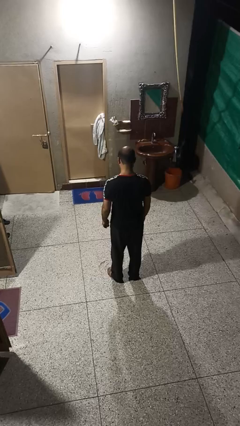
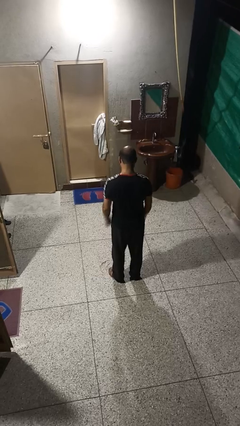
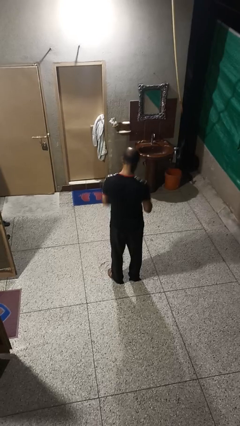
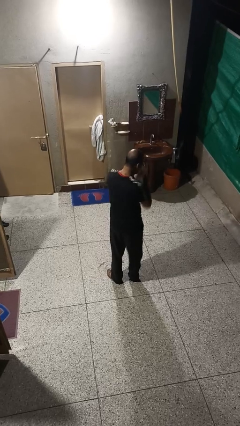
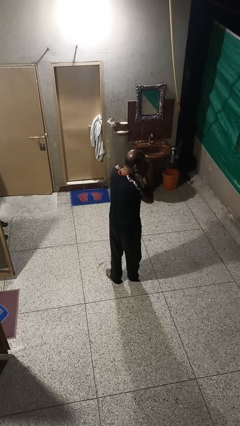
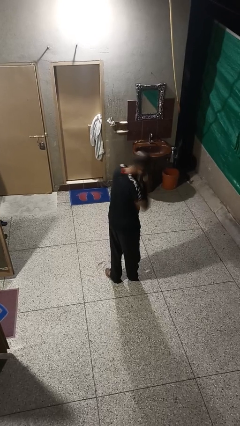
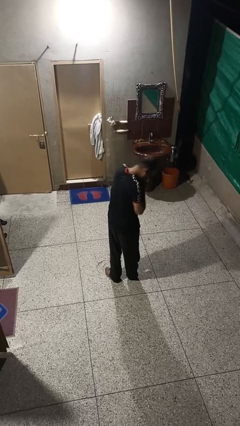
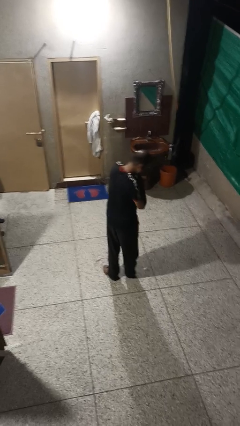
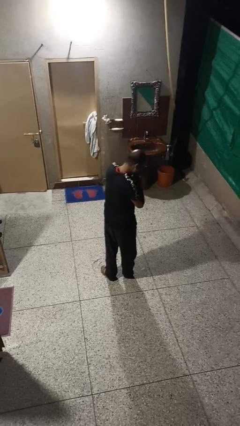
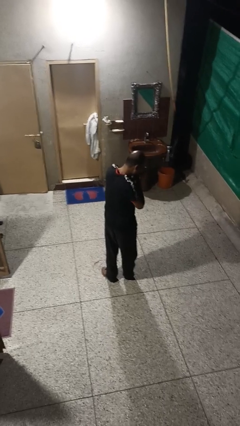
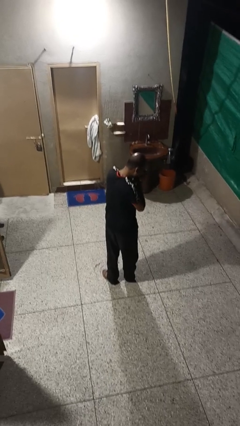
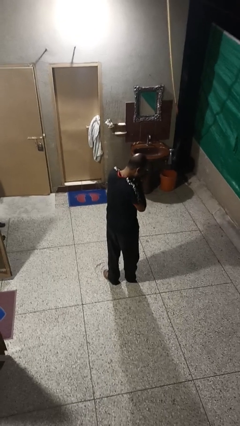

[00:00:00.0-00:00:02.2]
person sneezes into hand

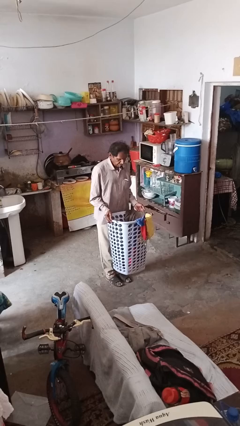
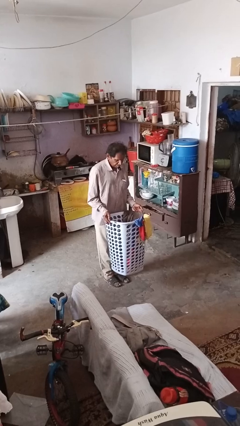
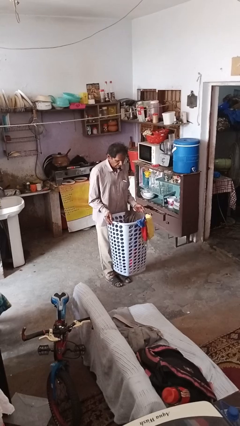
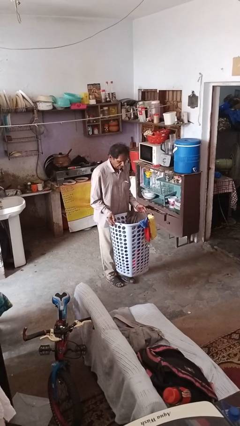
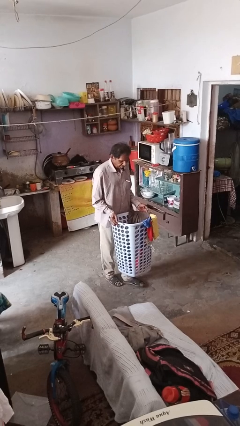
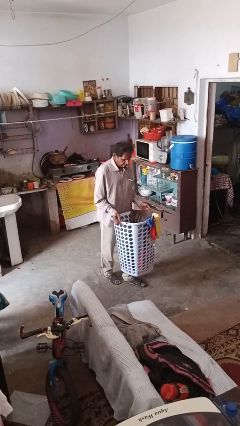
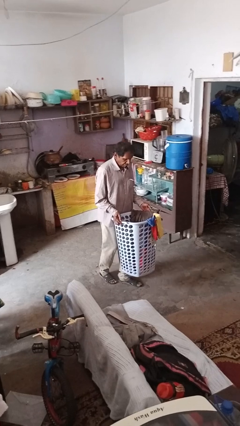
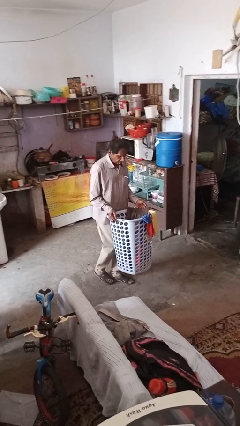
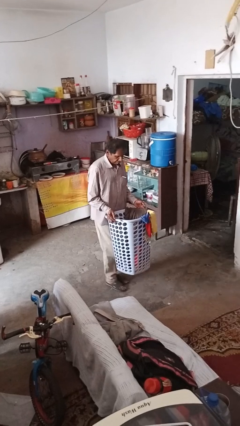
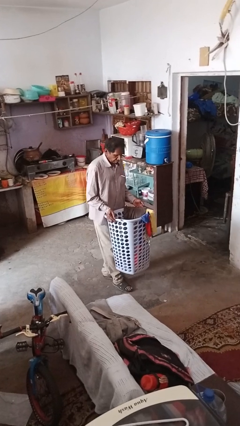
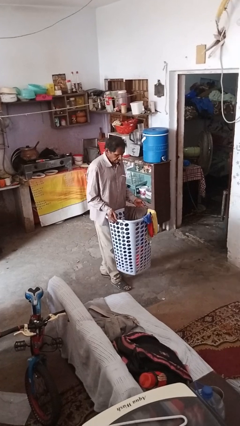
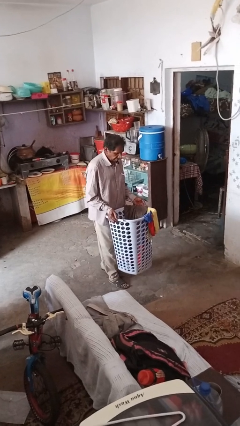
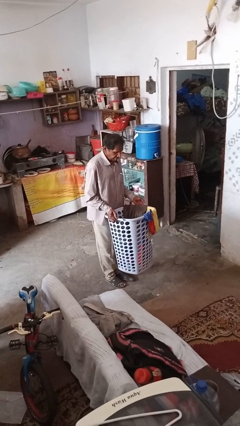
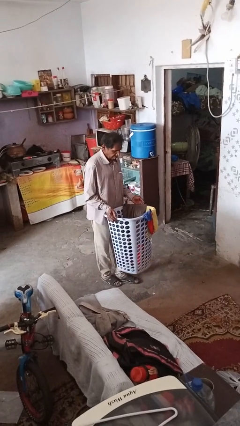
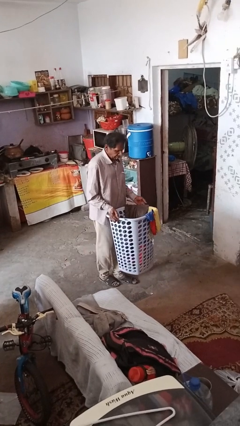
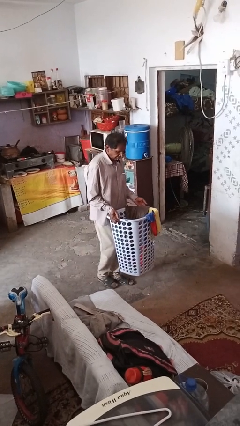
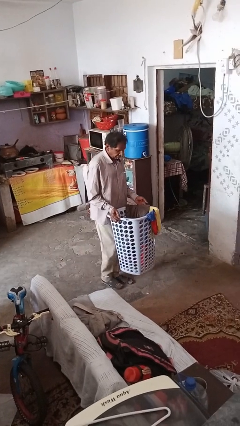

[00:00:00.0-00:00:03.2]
person carries laundry basket

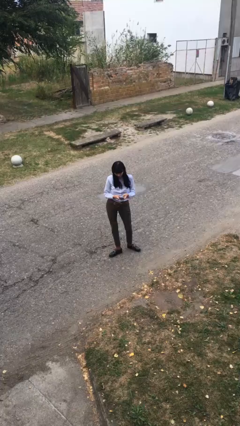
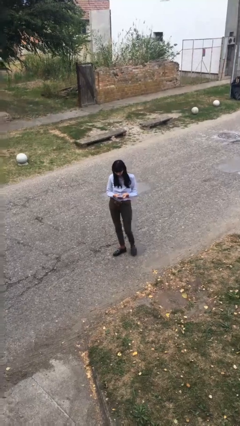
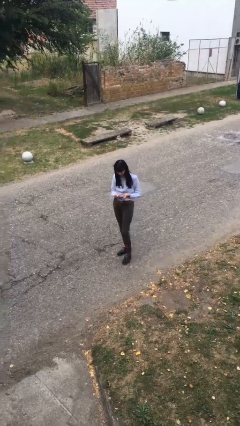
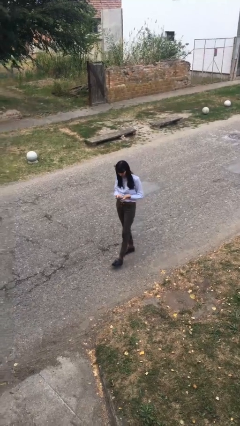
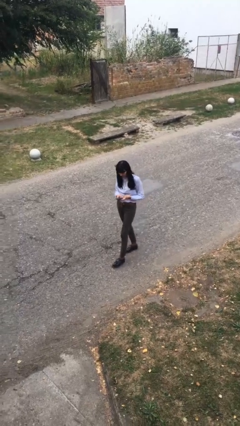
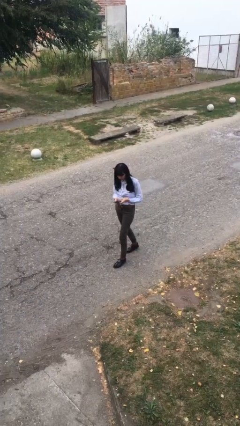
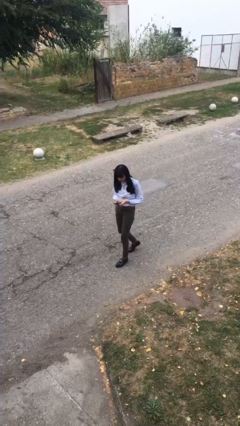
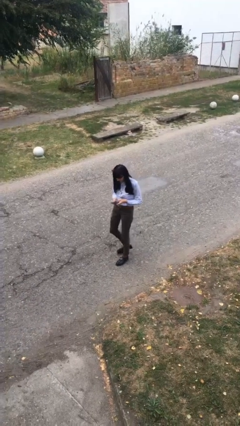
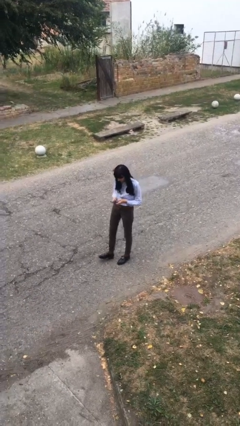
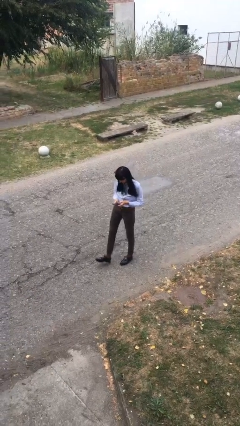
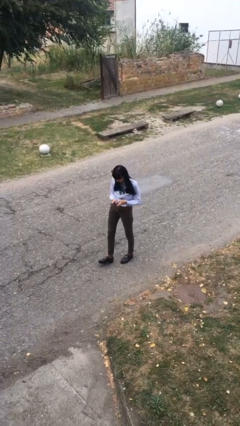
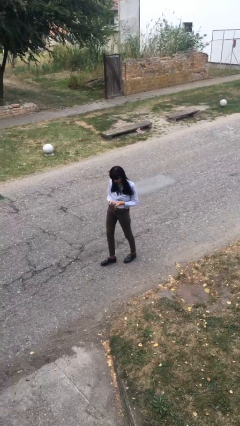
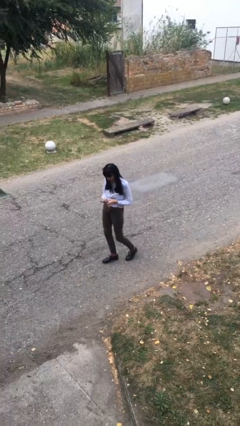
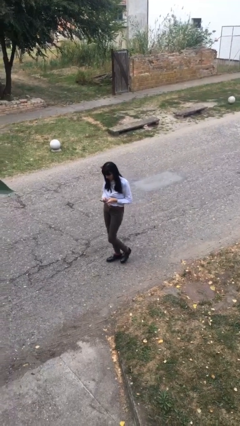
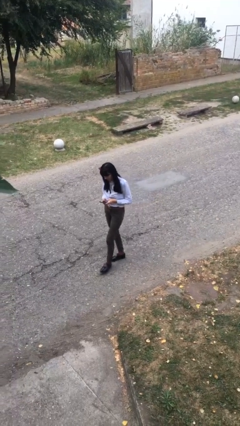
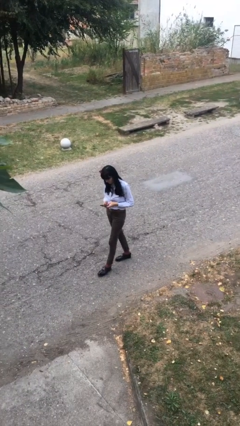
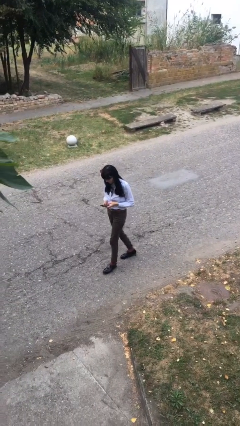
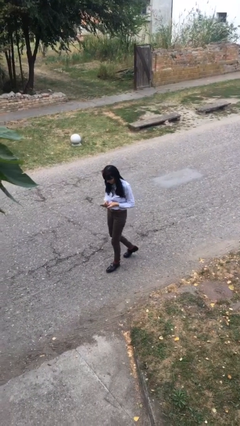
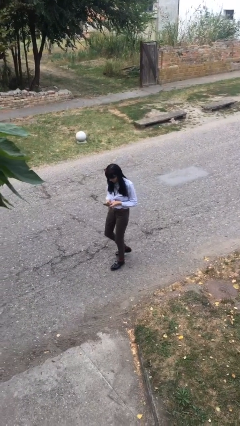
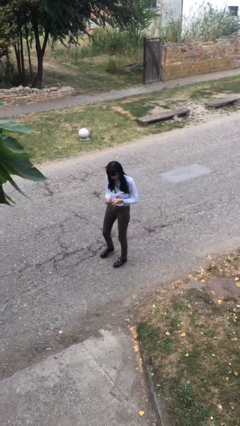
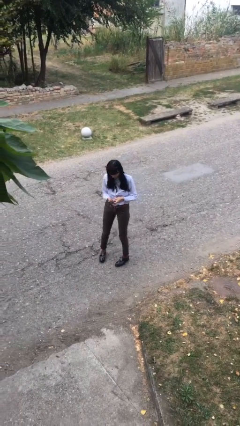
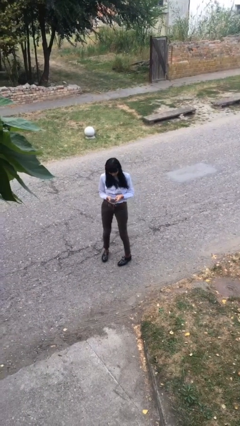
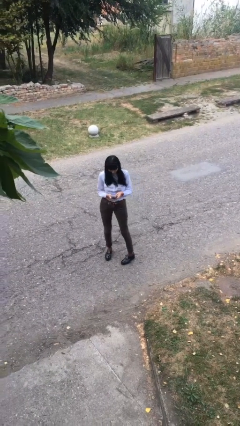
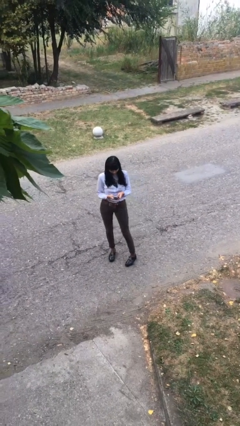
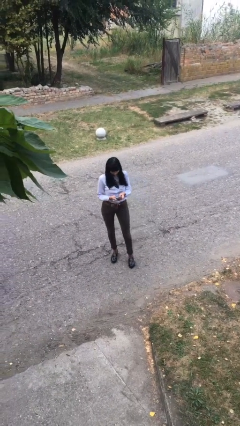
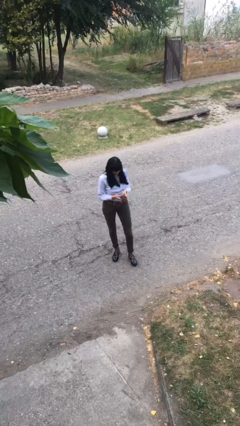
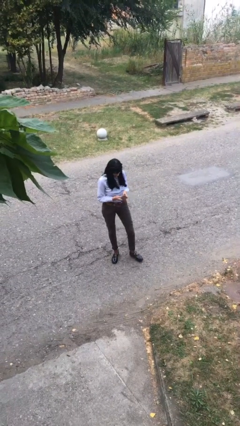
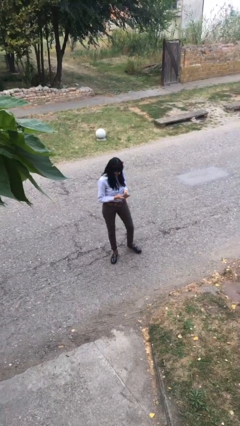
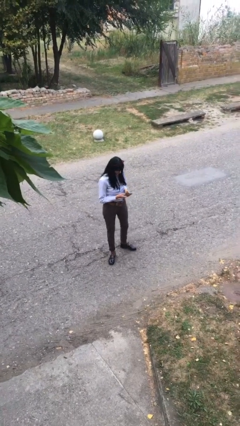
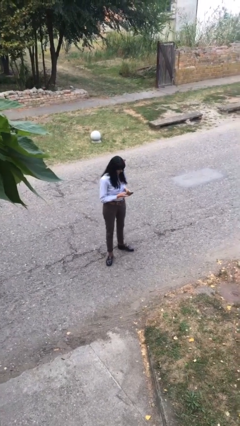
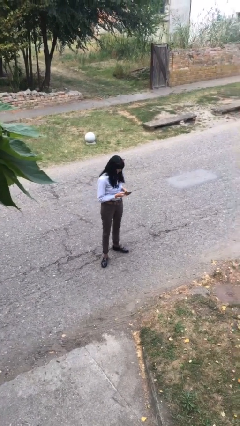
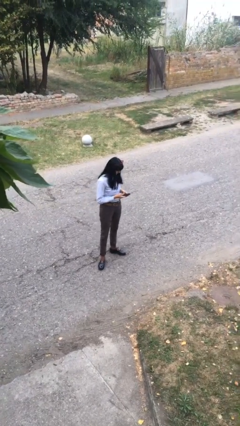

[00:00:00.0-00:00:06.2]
person texts on phone

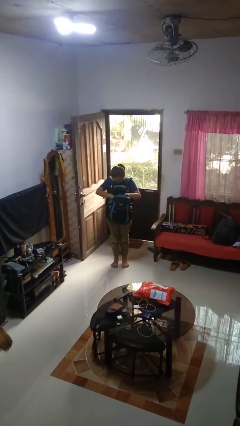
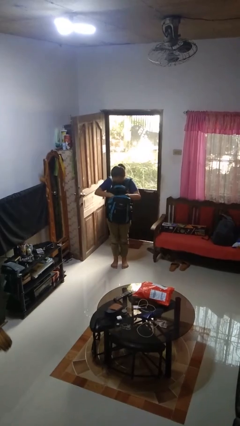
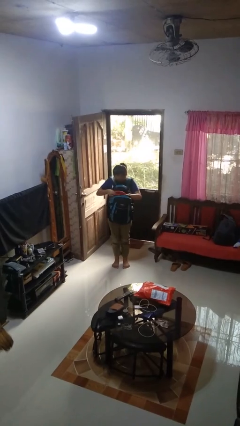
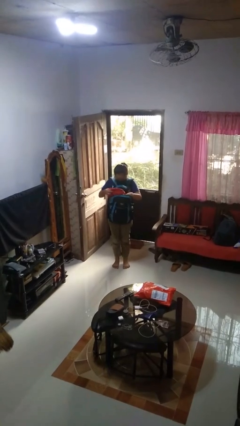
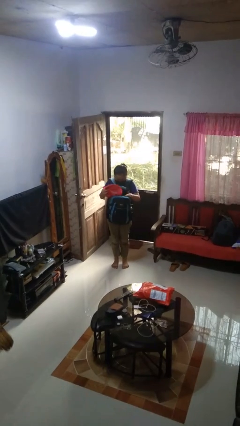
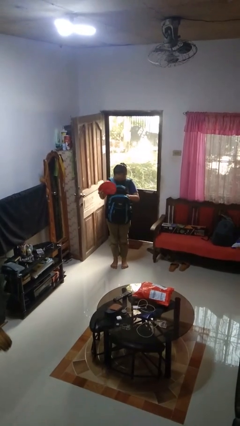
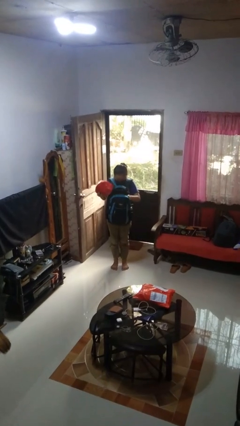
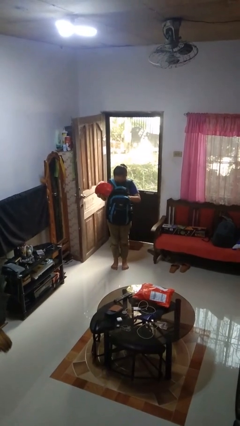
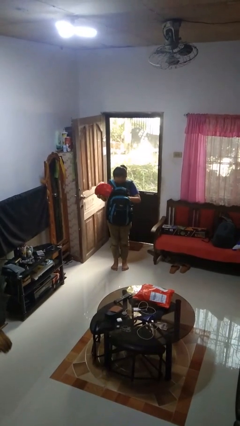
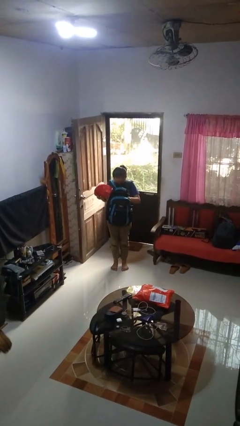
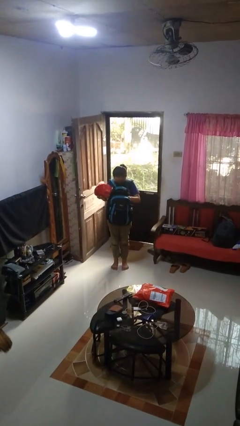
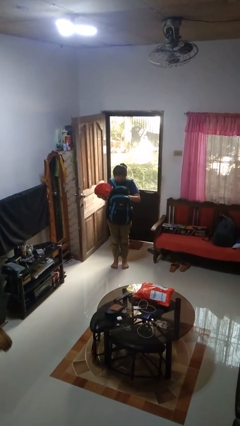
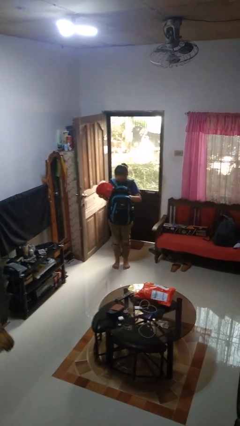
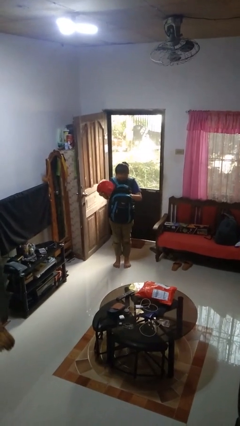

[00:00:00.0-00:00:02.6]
person takes object from backpack

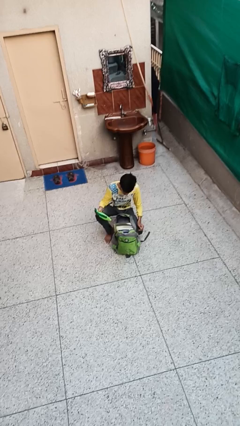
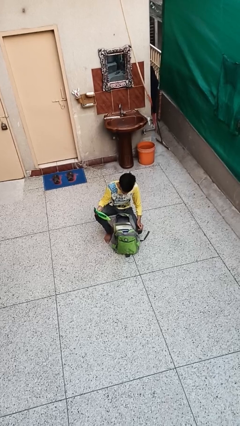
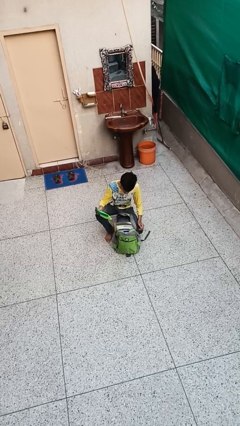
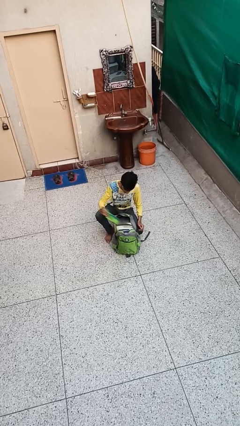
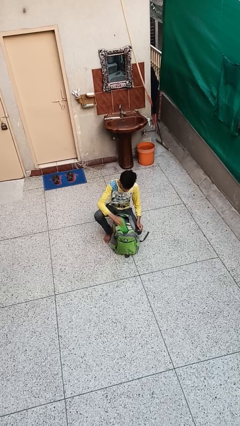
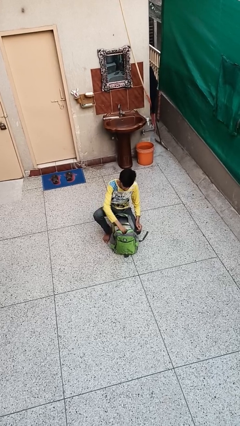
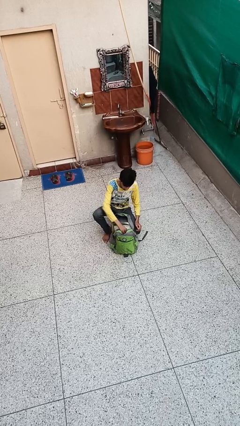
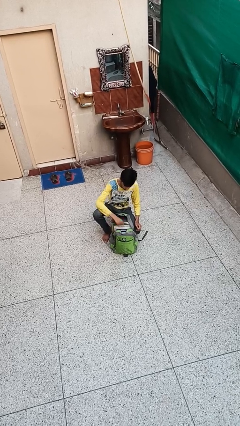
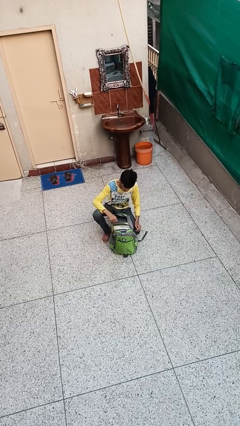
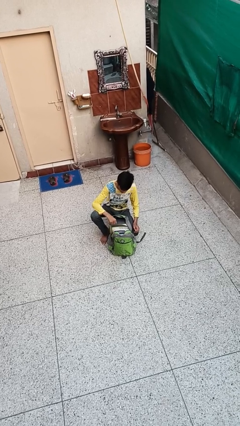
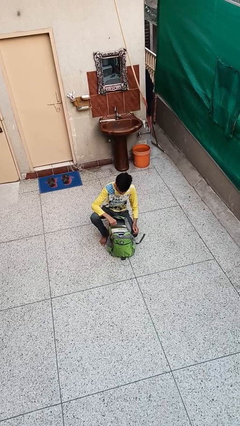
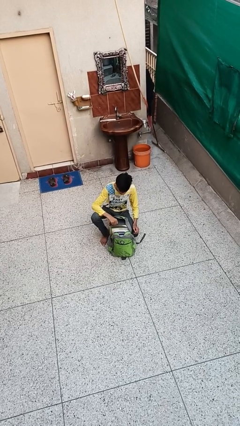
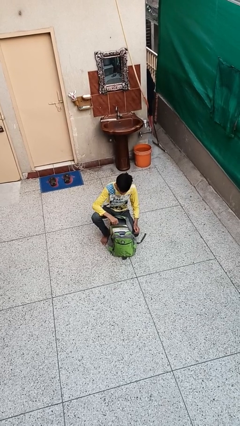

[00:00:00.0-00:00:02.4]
person puts object into backpack

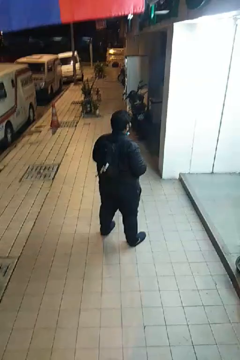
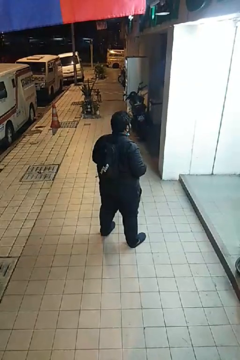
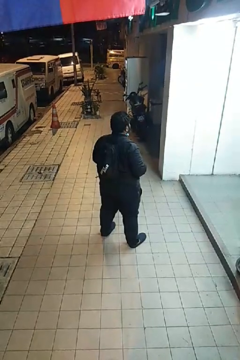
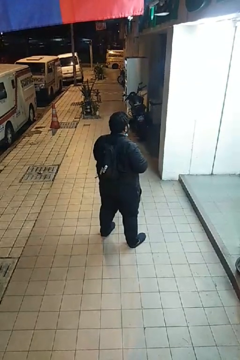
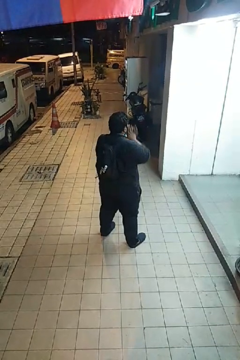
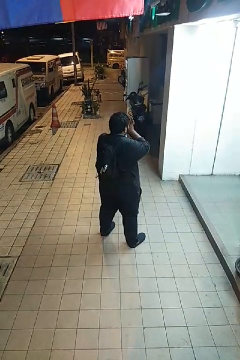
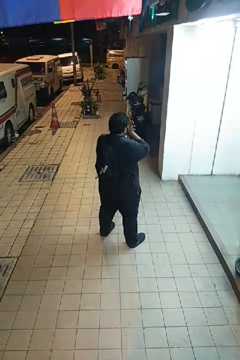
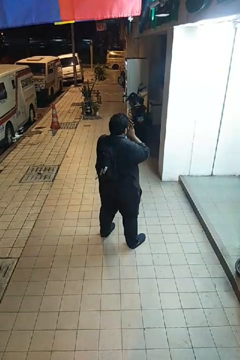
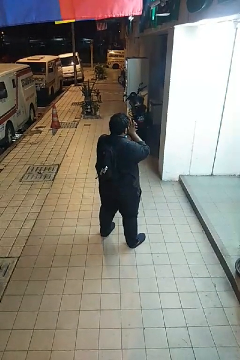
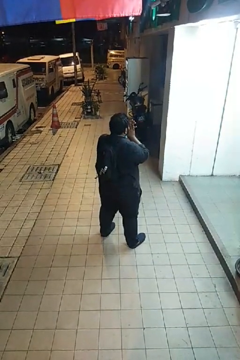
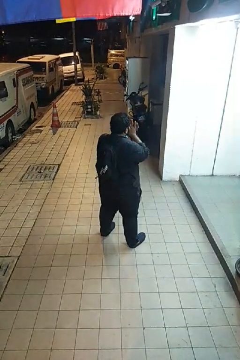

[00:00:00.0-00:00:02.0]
person blows into hands
